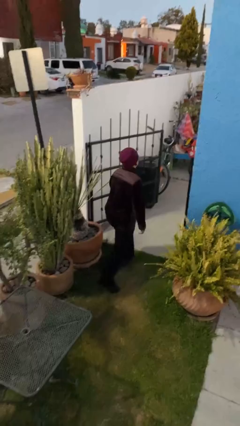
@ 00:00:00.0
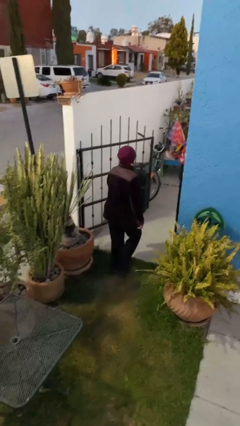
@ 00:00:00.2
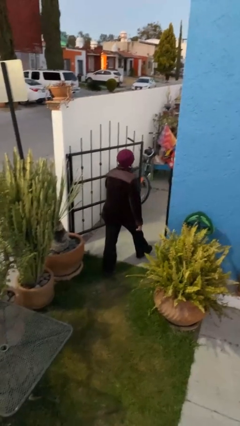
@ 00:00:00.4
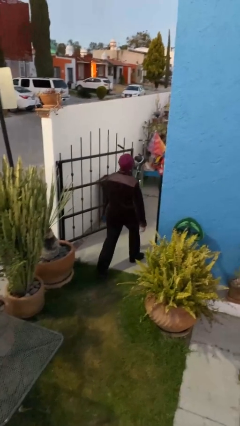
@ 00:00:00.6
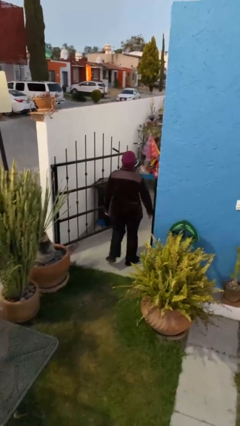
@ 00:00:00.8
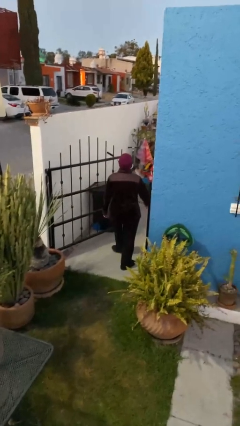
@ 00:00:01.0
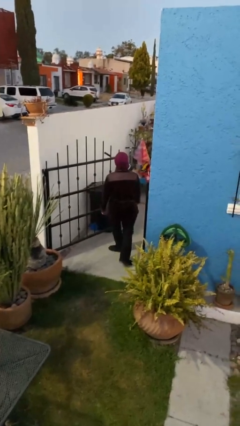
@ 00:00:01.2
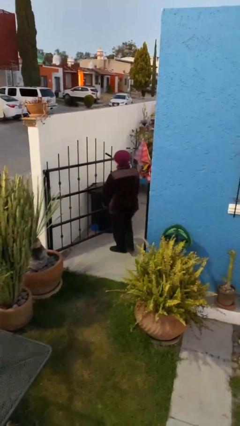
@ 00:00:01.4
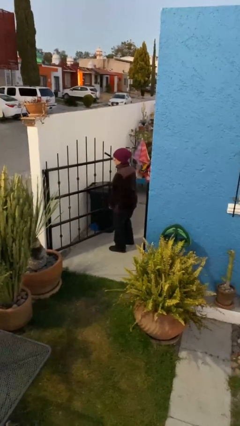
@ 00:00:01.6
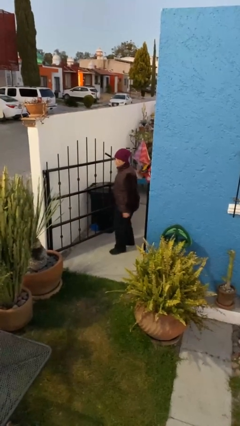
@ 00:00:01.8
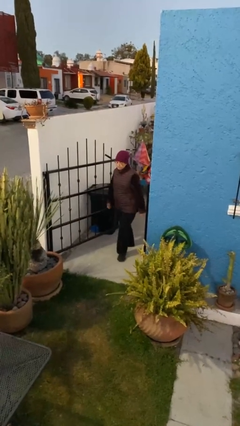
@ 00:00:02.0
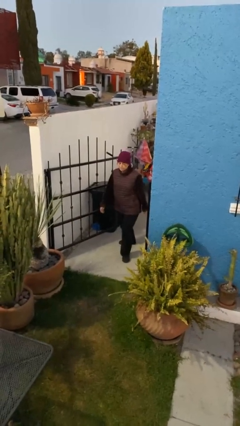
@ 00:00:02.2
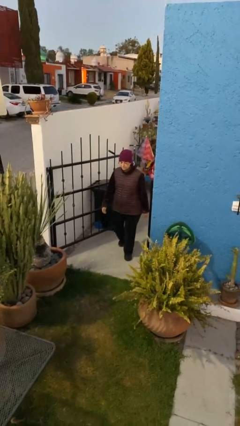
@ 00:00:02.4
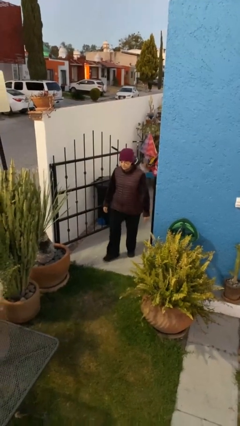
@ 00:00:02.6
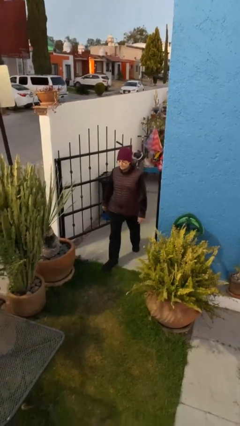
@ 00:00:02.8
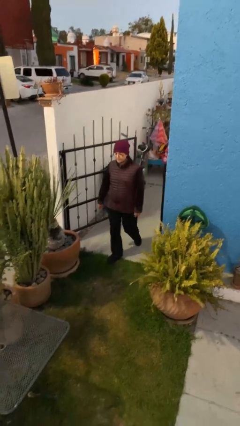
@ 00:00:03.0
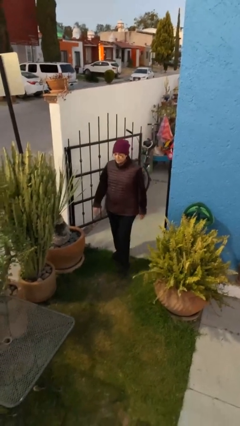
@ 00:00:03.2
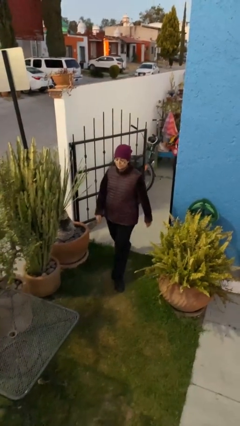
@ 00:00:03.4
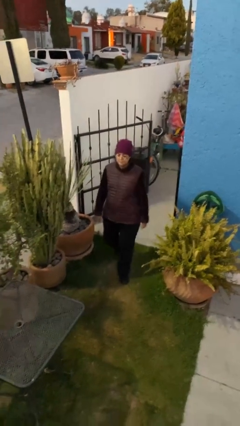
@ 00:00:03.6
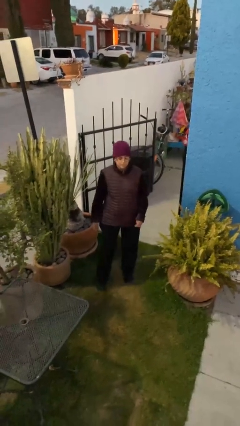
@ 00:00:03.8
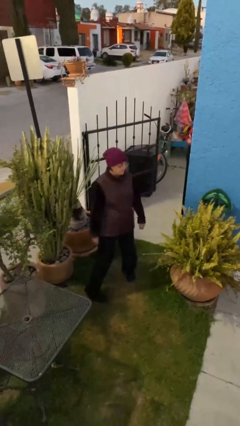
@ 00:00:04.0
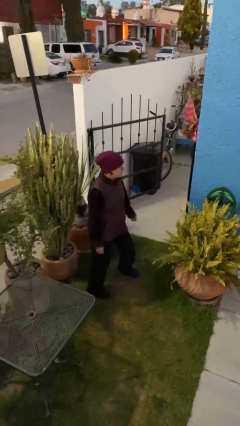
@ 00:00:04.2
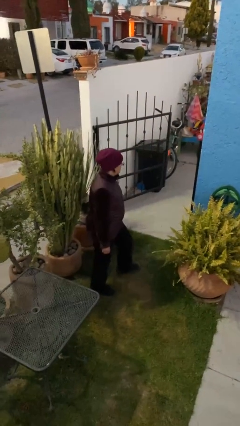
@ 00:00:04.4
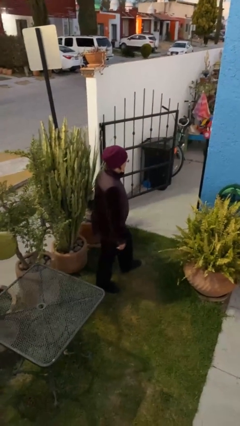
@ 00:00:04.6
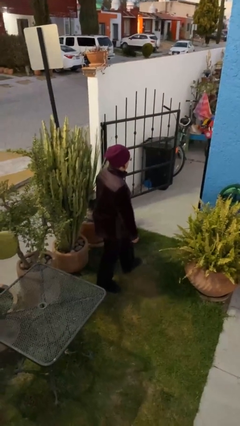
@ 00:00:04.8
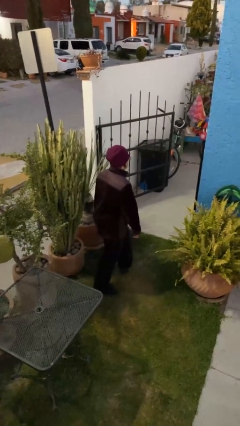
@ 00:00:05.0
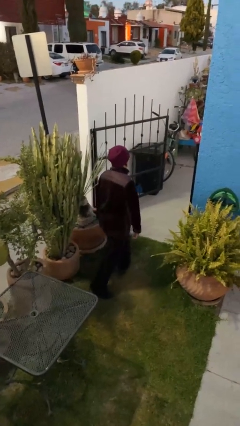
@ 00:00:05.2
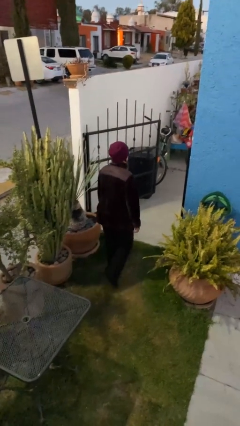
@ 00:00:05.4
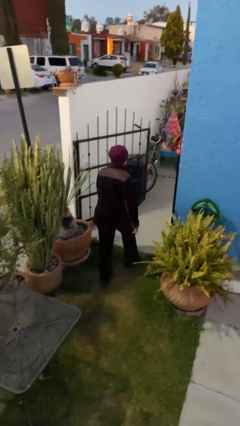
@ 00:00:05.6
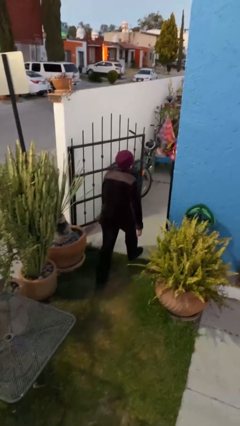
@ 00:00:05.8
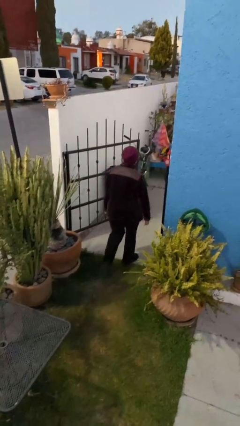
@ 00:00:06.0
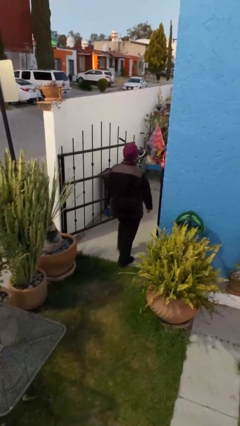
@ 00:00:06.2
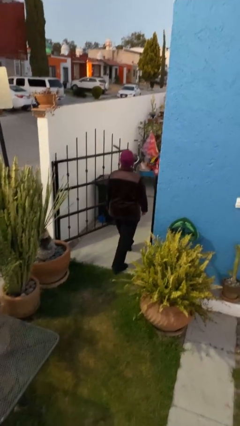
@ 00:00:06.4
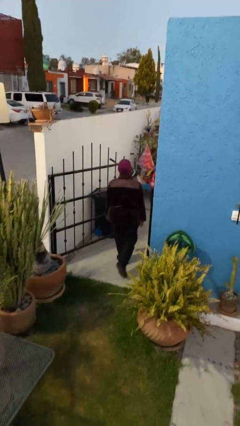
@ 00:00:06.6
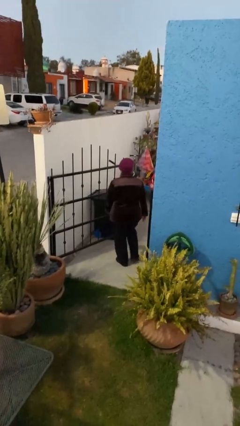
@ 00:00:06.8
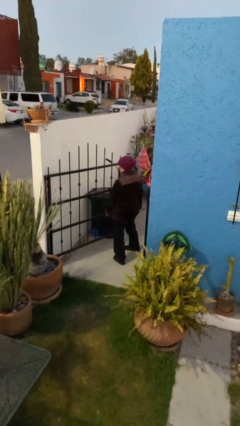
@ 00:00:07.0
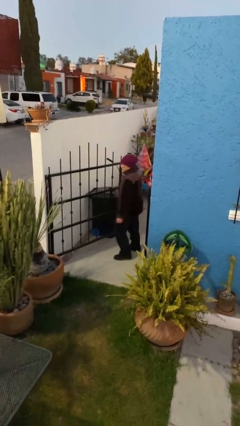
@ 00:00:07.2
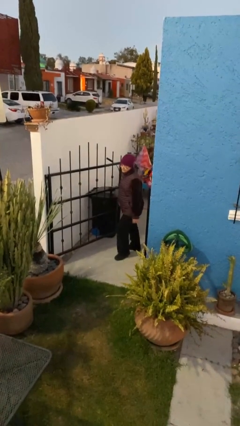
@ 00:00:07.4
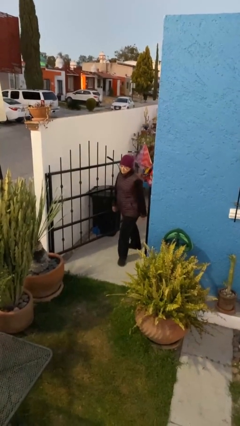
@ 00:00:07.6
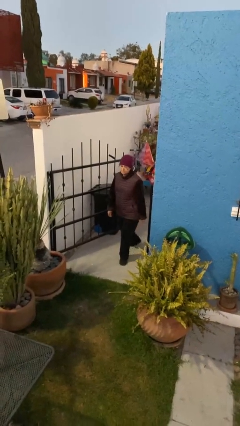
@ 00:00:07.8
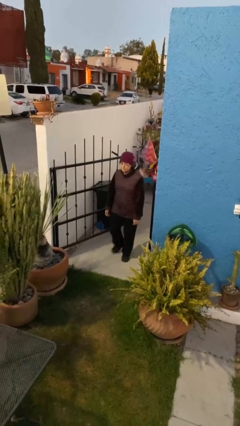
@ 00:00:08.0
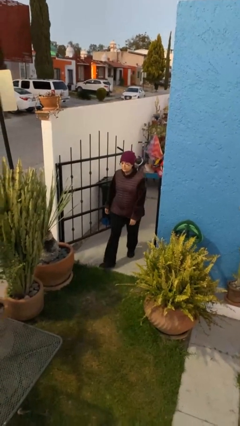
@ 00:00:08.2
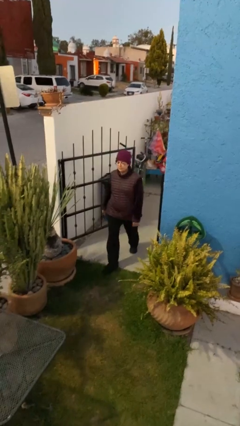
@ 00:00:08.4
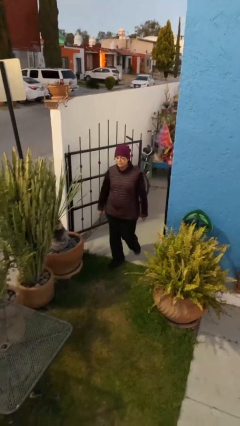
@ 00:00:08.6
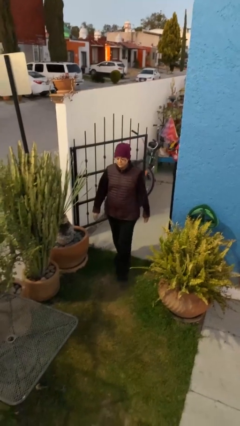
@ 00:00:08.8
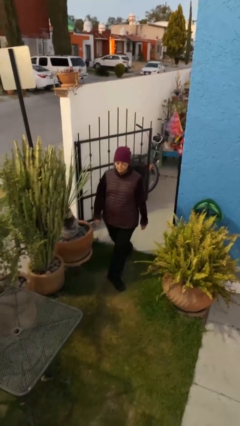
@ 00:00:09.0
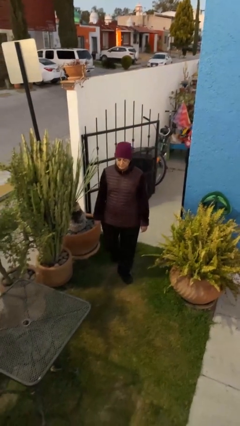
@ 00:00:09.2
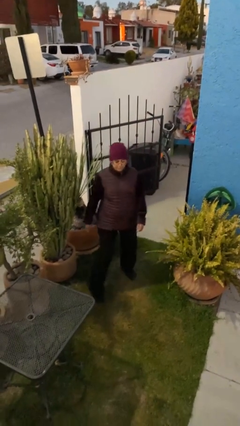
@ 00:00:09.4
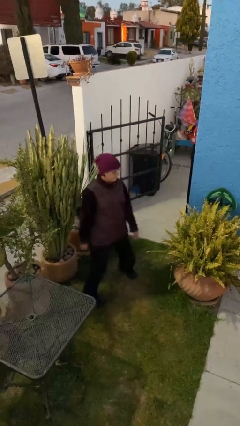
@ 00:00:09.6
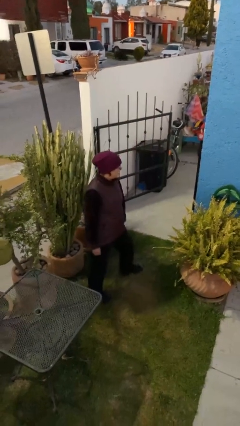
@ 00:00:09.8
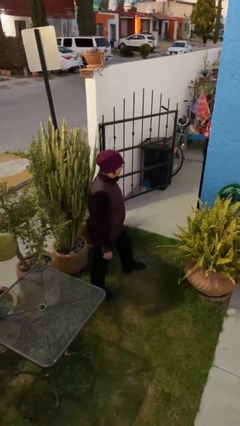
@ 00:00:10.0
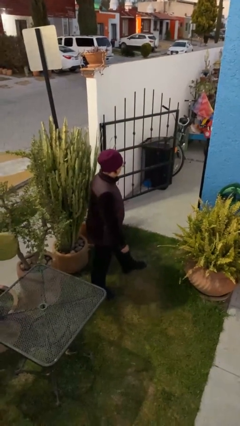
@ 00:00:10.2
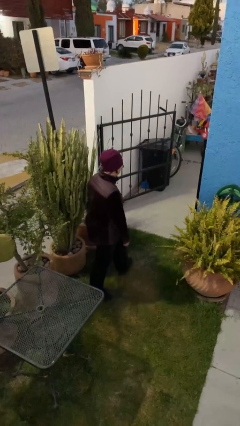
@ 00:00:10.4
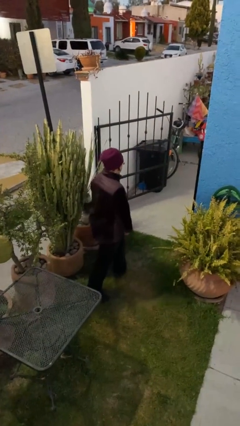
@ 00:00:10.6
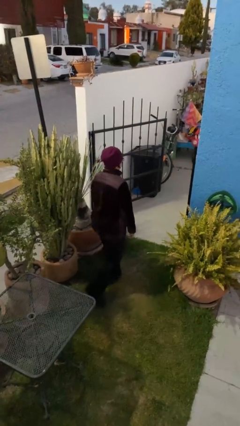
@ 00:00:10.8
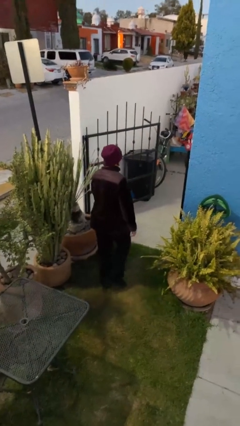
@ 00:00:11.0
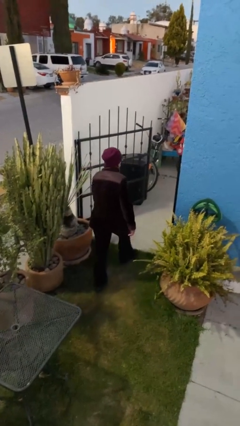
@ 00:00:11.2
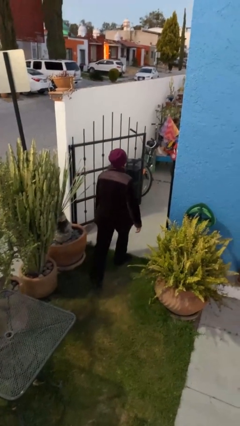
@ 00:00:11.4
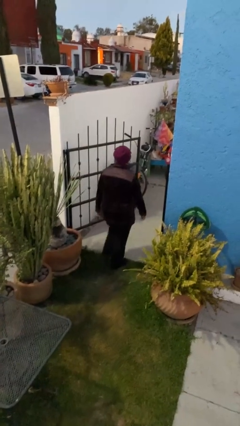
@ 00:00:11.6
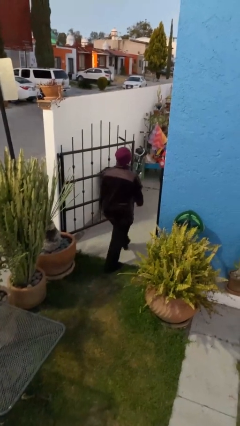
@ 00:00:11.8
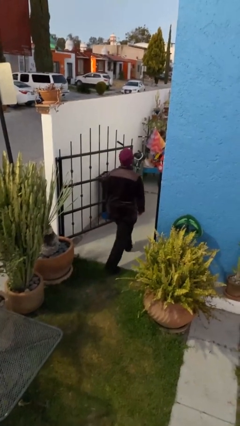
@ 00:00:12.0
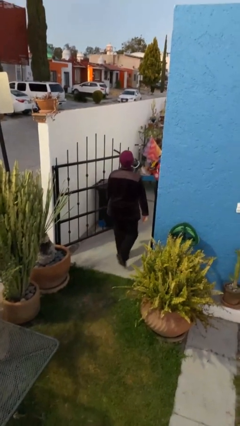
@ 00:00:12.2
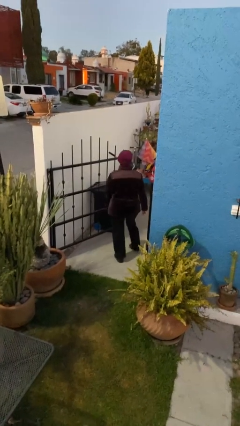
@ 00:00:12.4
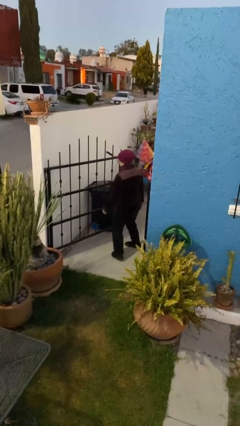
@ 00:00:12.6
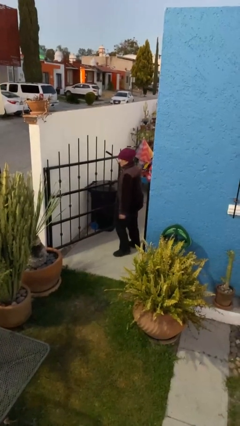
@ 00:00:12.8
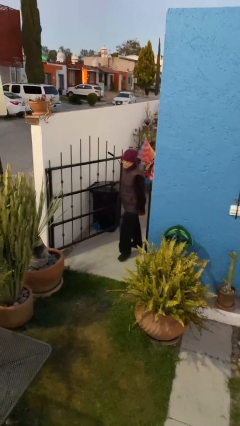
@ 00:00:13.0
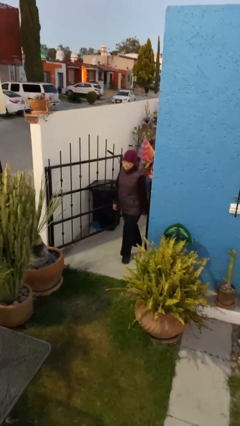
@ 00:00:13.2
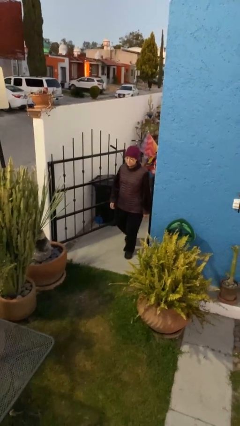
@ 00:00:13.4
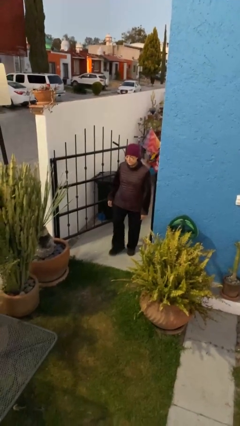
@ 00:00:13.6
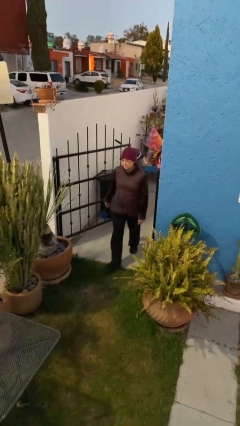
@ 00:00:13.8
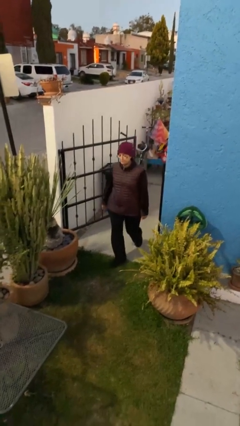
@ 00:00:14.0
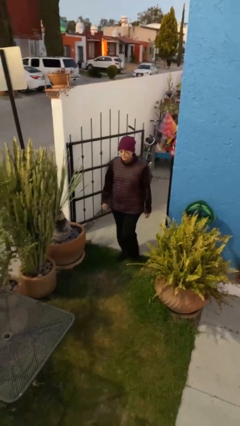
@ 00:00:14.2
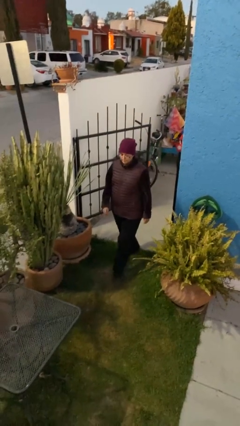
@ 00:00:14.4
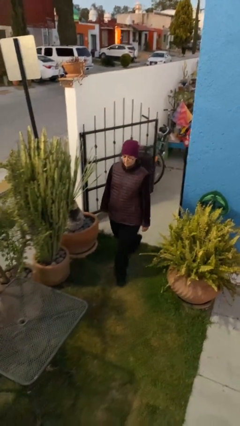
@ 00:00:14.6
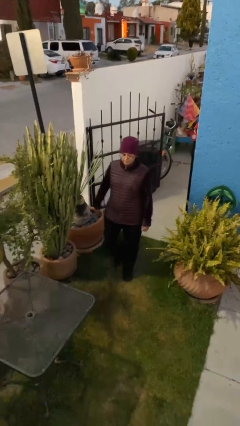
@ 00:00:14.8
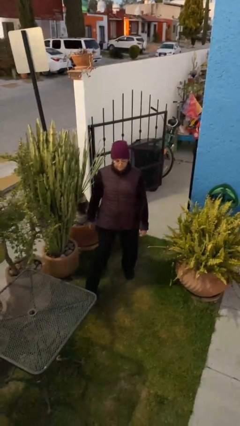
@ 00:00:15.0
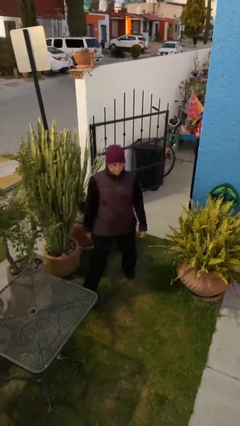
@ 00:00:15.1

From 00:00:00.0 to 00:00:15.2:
person texts on phone

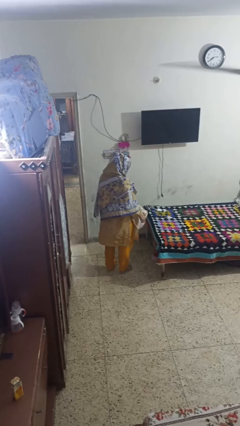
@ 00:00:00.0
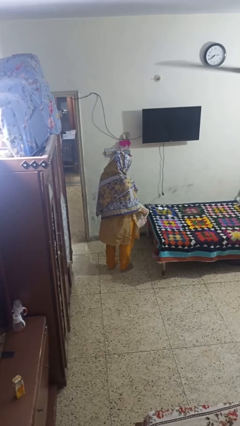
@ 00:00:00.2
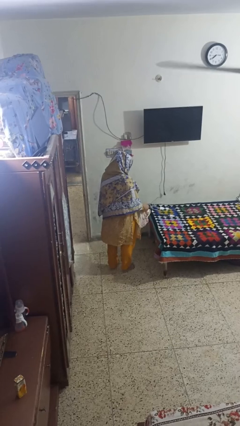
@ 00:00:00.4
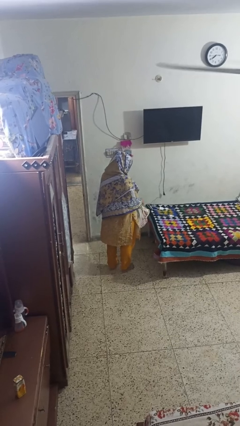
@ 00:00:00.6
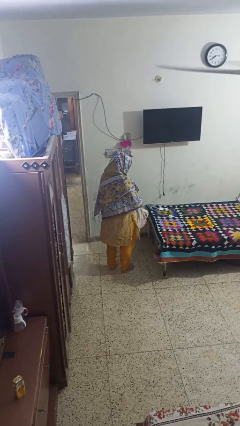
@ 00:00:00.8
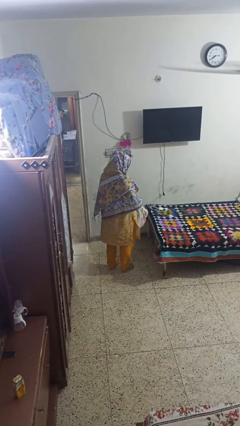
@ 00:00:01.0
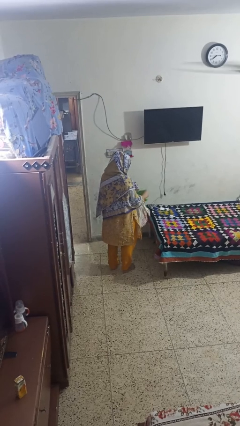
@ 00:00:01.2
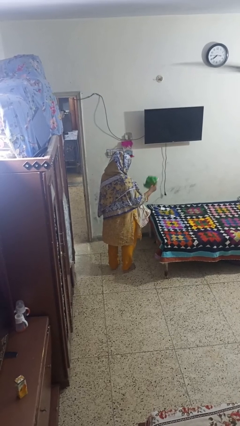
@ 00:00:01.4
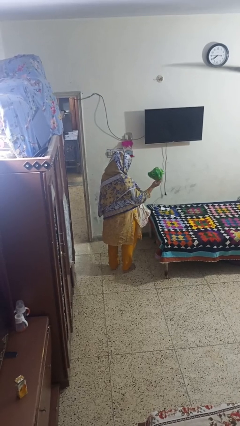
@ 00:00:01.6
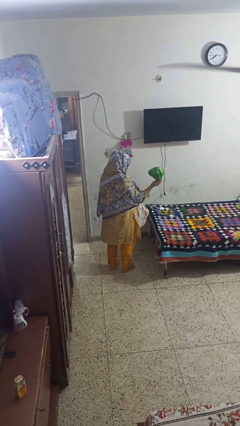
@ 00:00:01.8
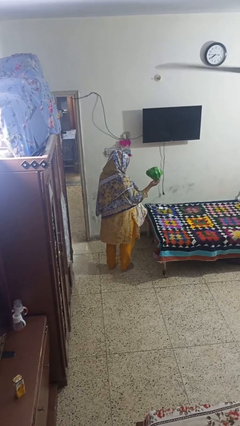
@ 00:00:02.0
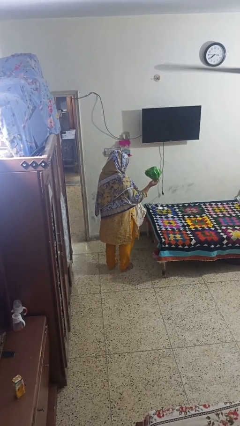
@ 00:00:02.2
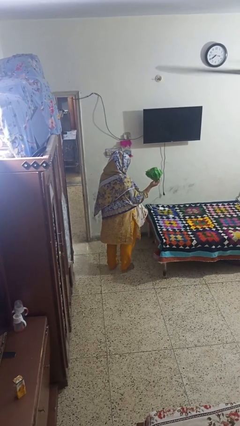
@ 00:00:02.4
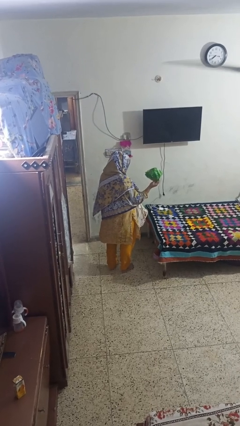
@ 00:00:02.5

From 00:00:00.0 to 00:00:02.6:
person takes object from bag

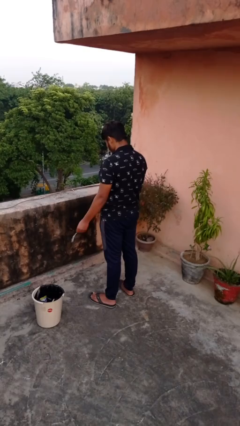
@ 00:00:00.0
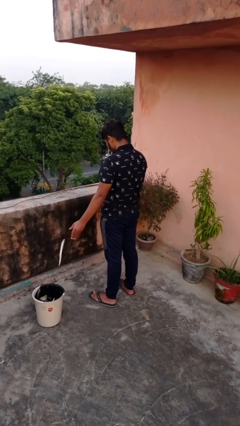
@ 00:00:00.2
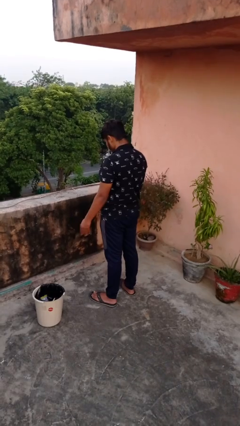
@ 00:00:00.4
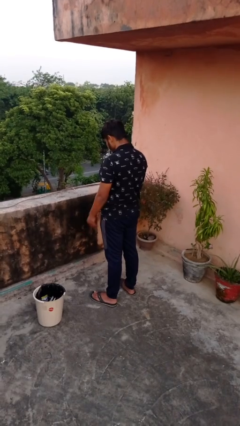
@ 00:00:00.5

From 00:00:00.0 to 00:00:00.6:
person discards trash
